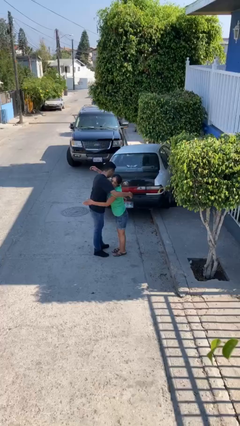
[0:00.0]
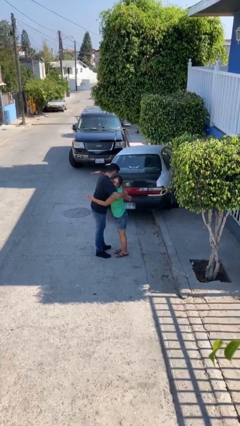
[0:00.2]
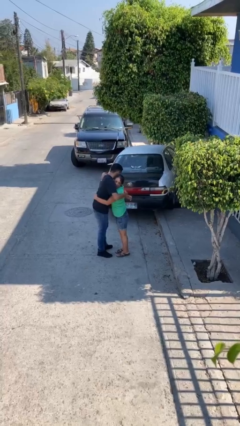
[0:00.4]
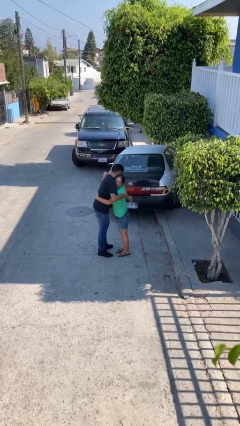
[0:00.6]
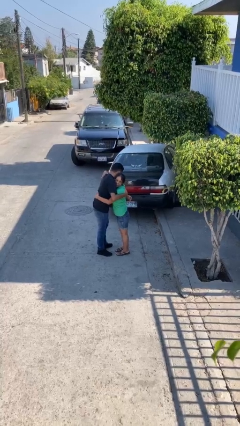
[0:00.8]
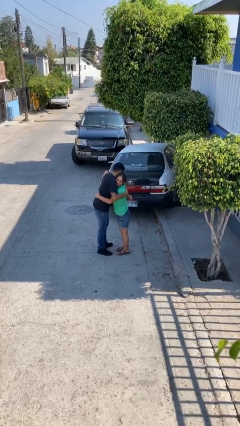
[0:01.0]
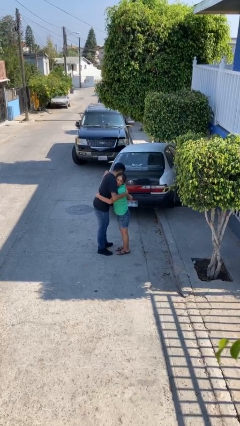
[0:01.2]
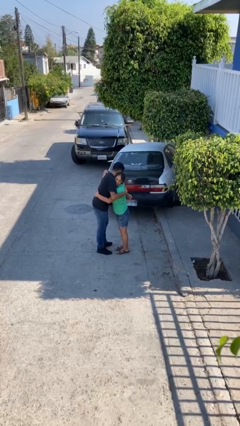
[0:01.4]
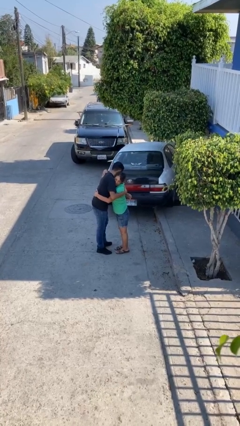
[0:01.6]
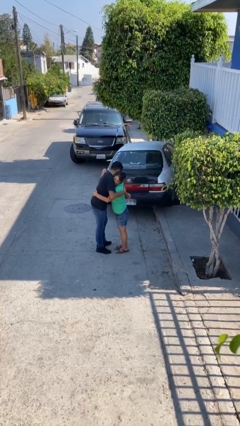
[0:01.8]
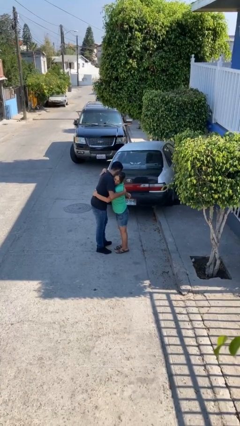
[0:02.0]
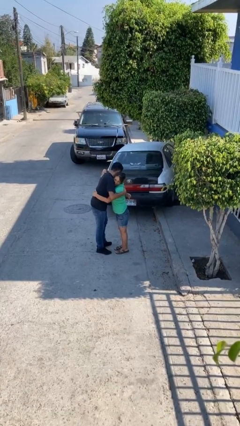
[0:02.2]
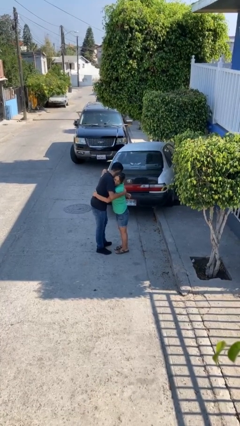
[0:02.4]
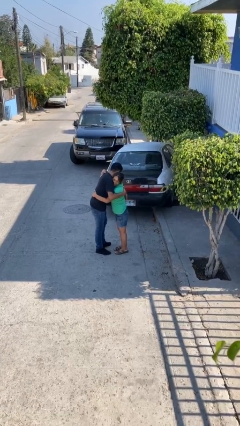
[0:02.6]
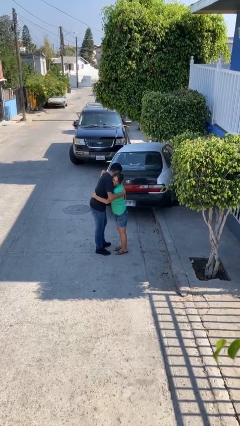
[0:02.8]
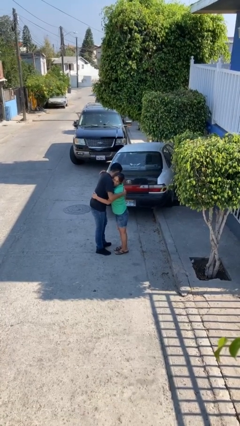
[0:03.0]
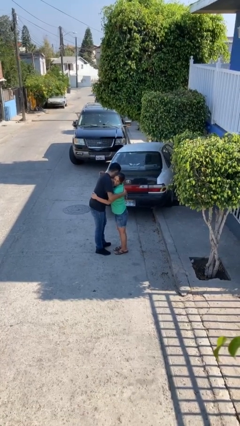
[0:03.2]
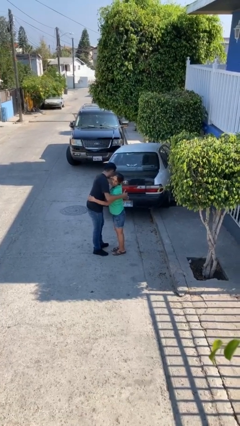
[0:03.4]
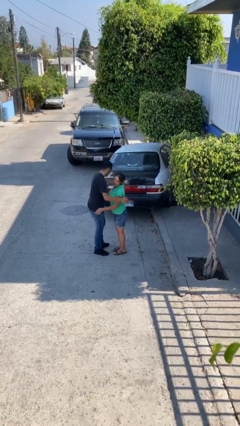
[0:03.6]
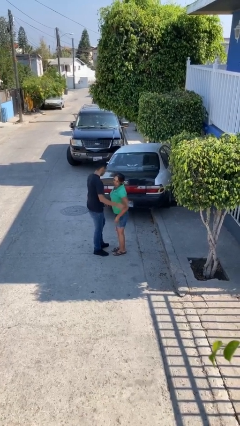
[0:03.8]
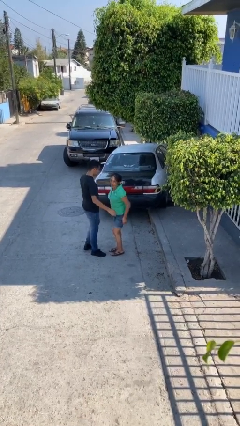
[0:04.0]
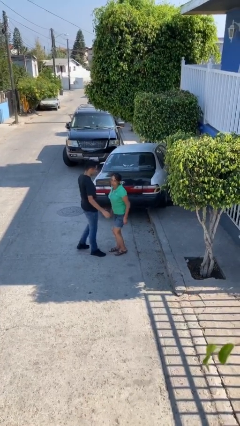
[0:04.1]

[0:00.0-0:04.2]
person embraces person

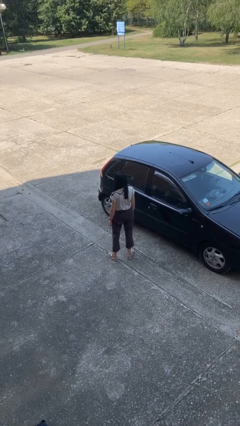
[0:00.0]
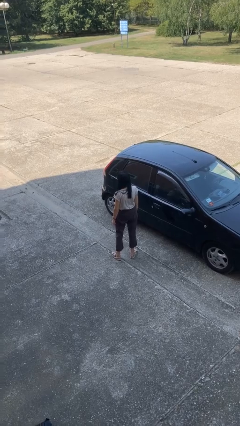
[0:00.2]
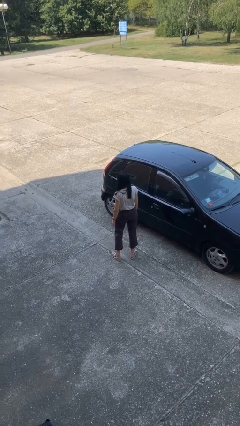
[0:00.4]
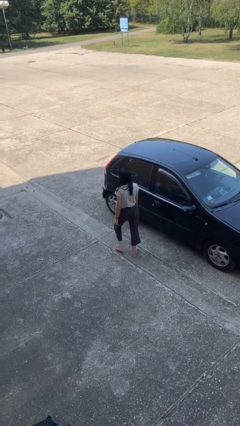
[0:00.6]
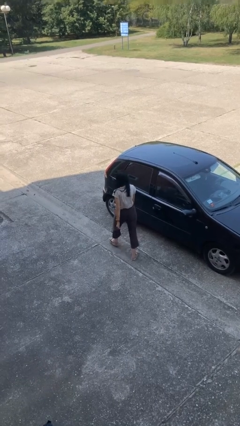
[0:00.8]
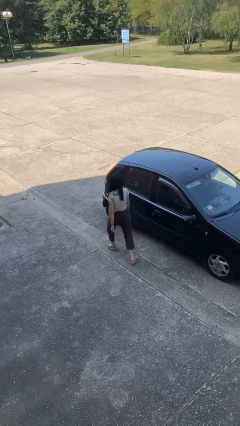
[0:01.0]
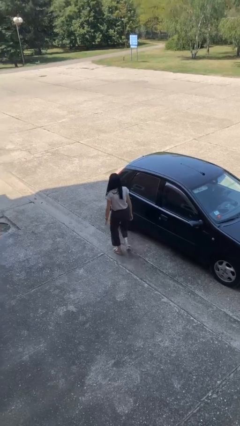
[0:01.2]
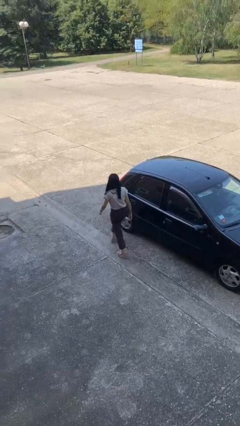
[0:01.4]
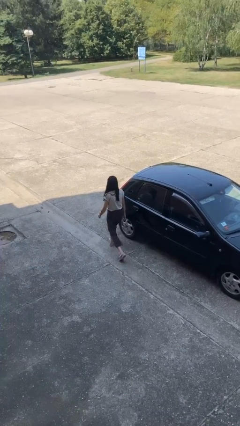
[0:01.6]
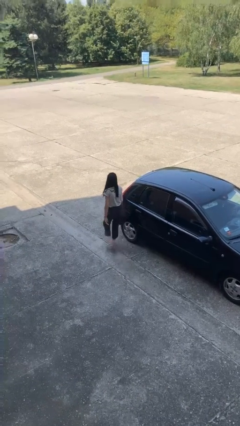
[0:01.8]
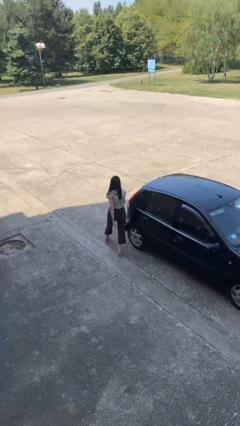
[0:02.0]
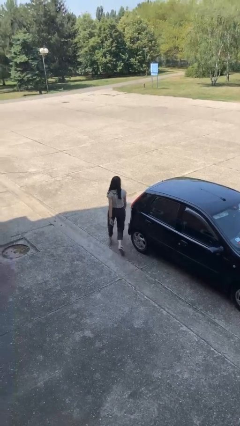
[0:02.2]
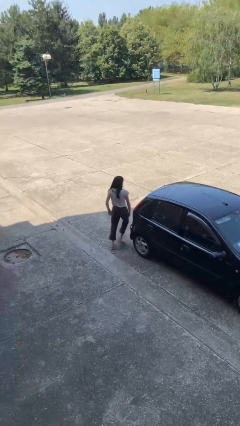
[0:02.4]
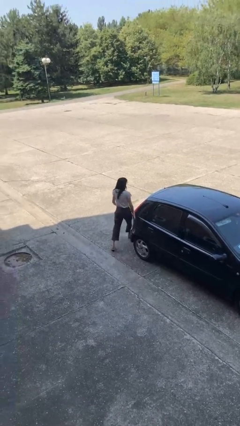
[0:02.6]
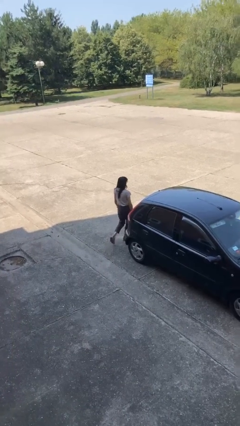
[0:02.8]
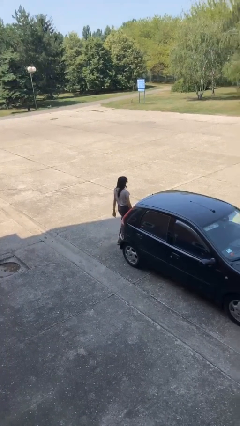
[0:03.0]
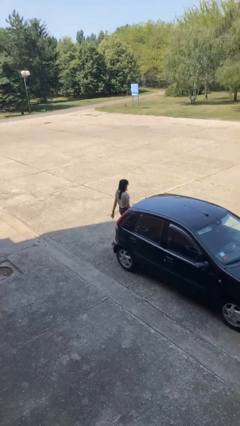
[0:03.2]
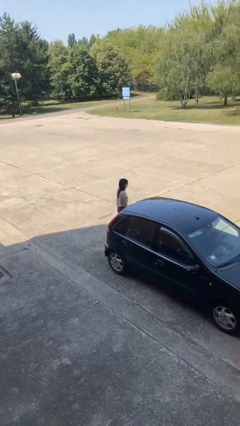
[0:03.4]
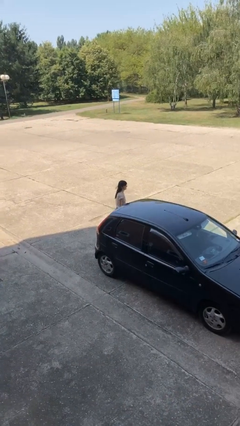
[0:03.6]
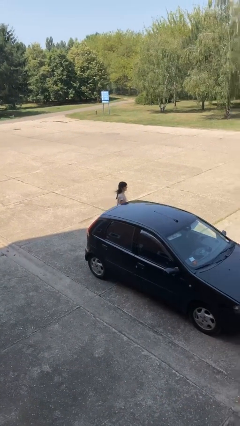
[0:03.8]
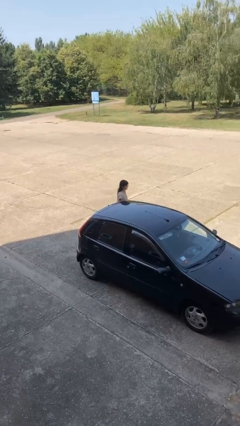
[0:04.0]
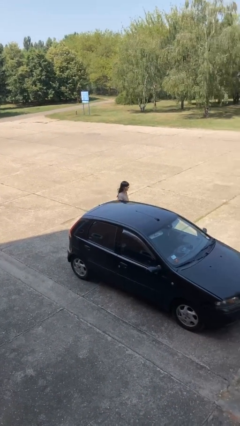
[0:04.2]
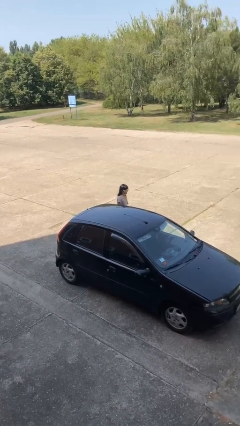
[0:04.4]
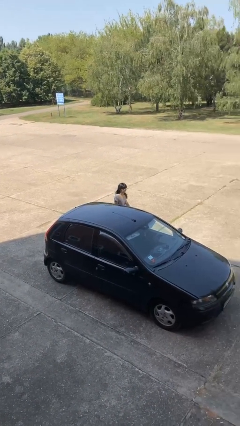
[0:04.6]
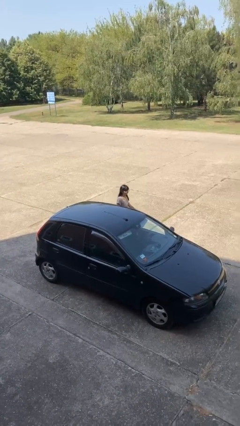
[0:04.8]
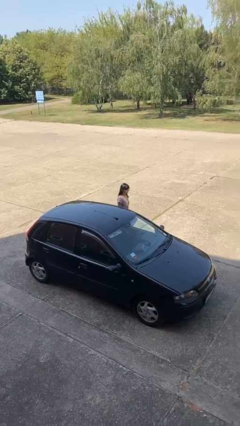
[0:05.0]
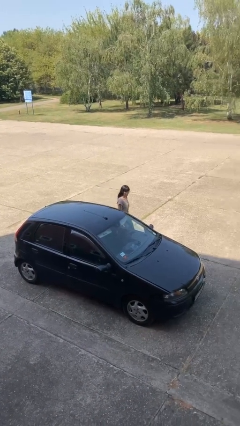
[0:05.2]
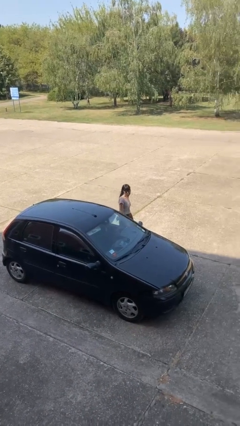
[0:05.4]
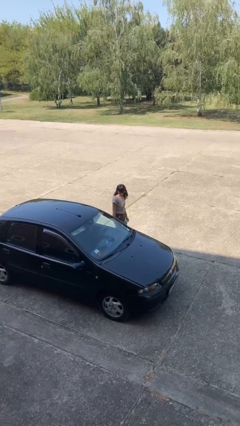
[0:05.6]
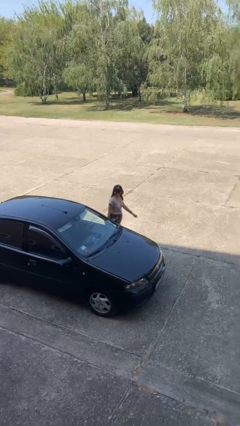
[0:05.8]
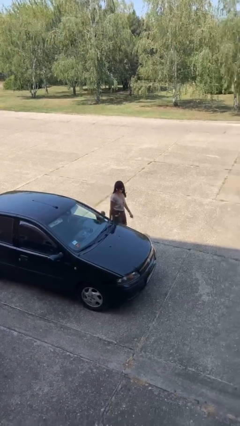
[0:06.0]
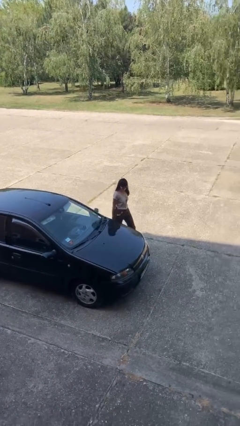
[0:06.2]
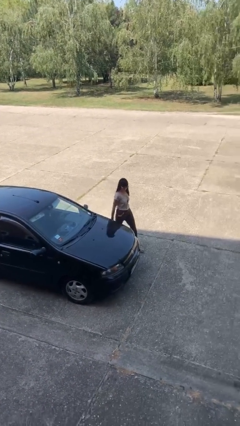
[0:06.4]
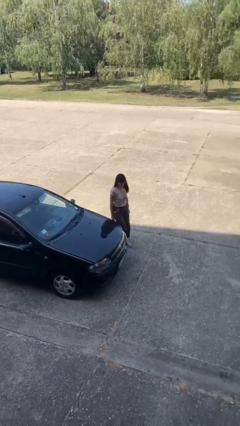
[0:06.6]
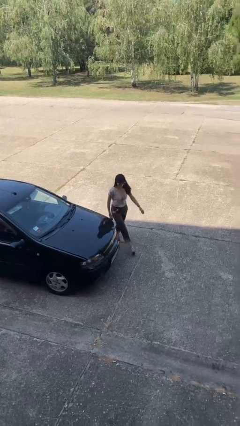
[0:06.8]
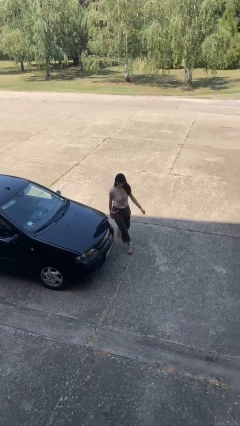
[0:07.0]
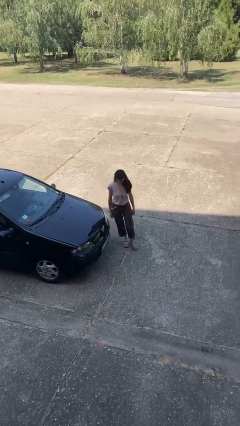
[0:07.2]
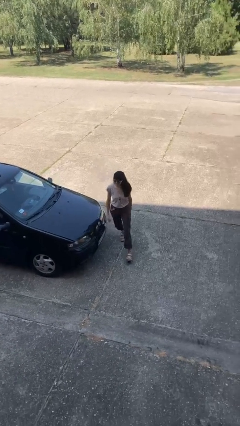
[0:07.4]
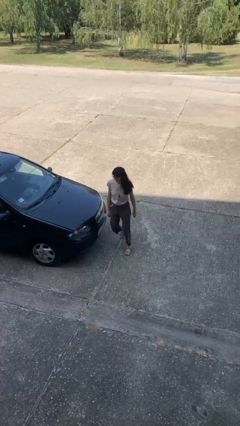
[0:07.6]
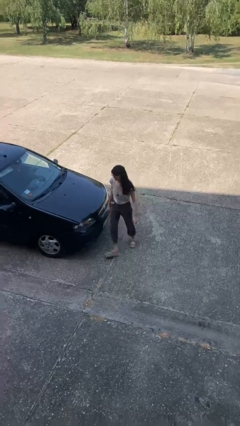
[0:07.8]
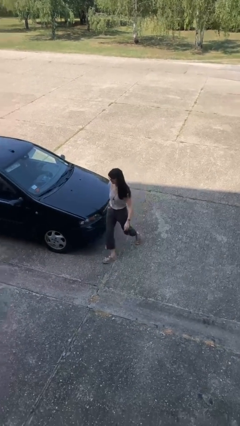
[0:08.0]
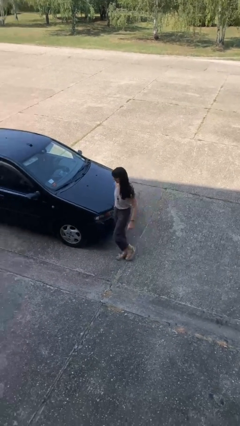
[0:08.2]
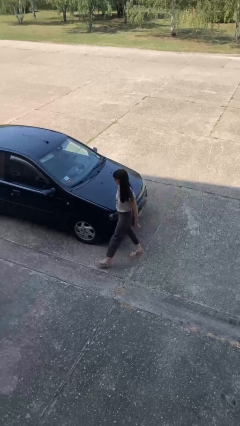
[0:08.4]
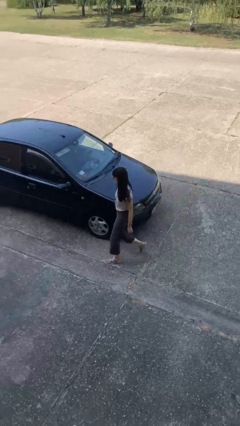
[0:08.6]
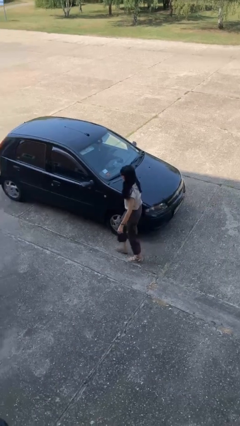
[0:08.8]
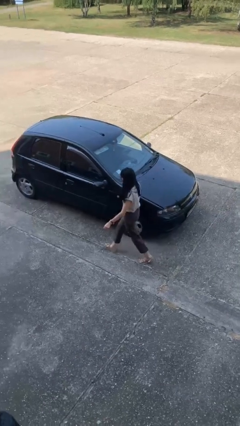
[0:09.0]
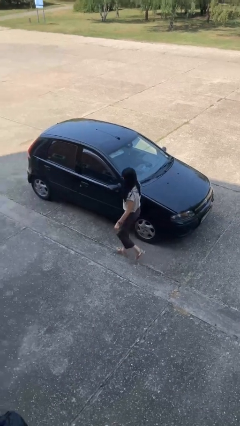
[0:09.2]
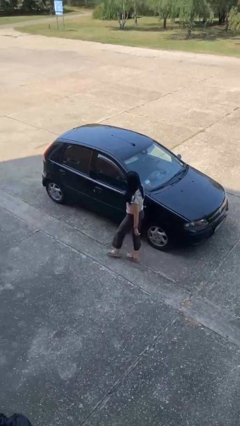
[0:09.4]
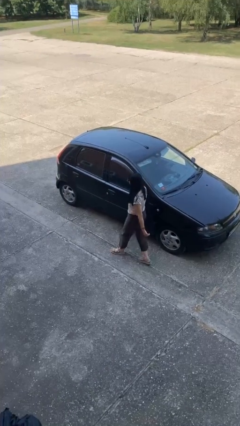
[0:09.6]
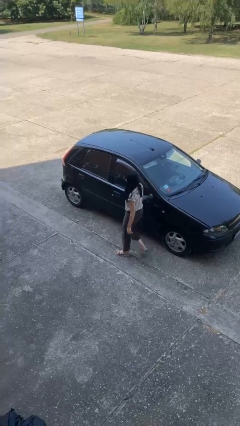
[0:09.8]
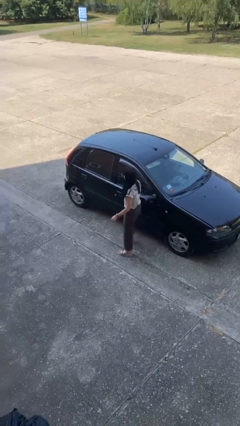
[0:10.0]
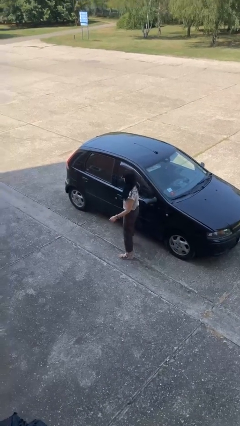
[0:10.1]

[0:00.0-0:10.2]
person walks around car

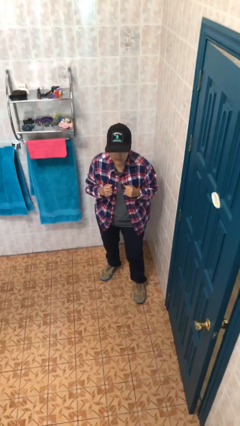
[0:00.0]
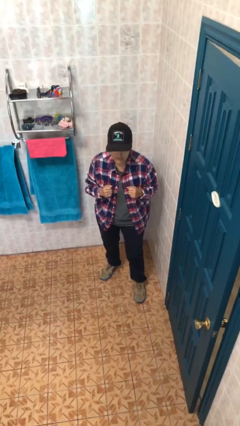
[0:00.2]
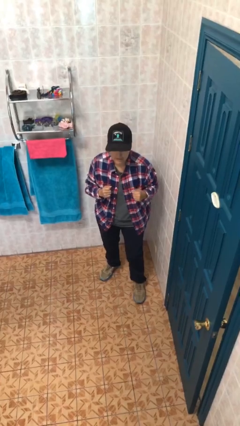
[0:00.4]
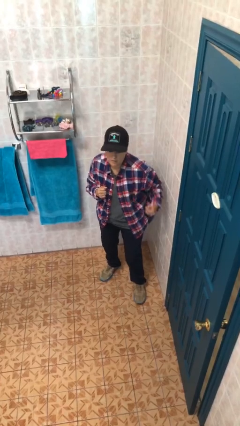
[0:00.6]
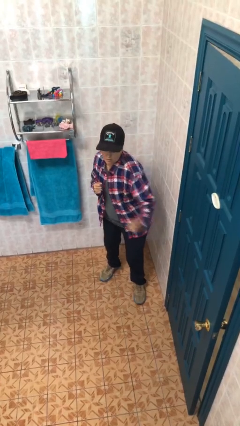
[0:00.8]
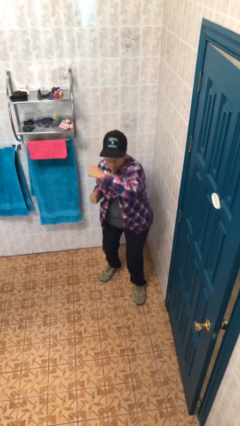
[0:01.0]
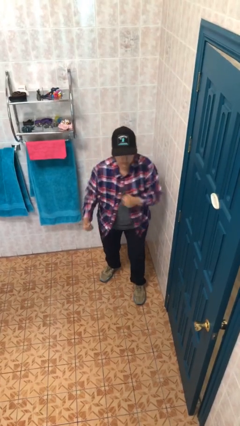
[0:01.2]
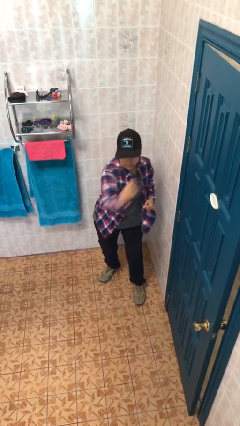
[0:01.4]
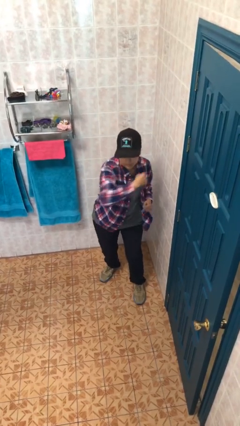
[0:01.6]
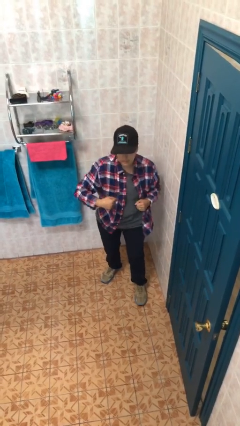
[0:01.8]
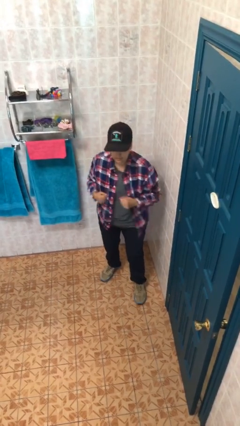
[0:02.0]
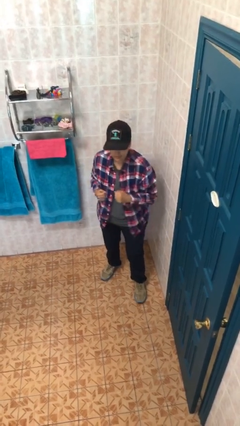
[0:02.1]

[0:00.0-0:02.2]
person punches

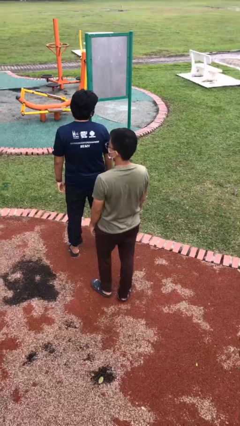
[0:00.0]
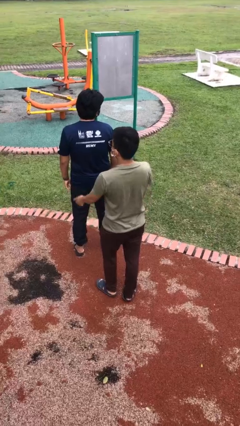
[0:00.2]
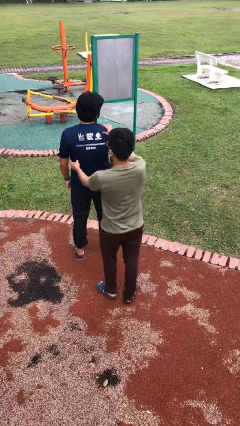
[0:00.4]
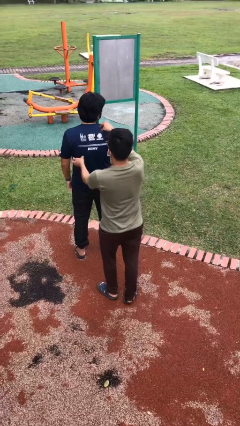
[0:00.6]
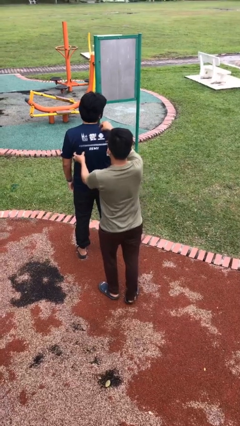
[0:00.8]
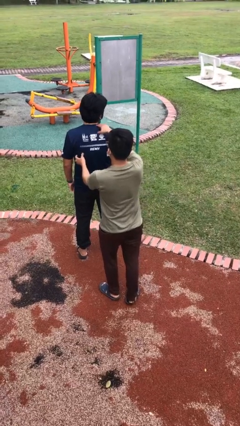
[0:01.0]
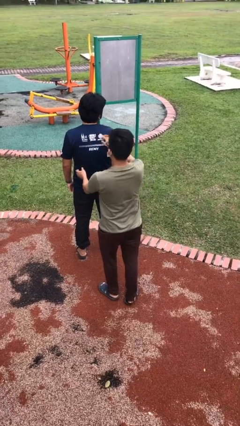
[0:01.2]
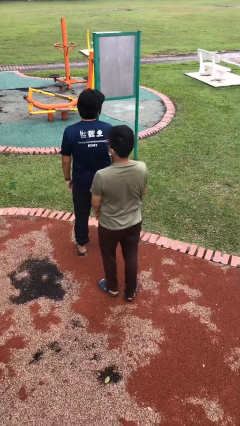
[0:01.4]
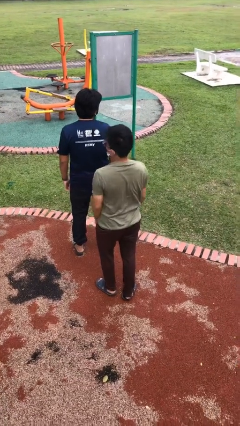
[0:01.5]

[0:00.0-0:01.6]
person tickles person
